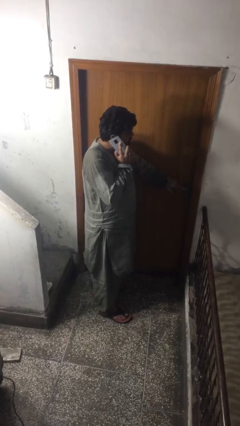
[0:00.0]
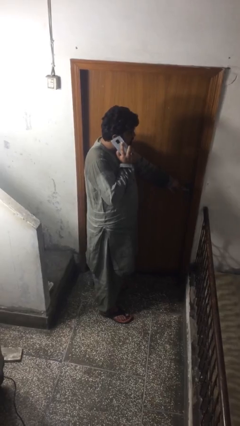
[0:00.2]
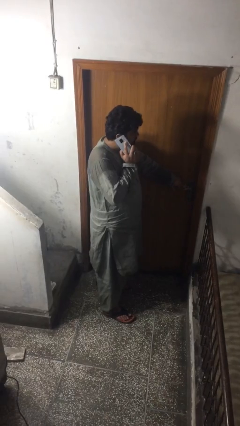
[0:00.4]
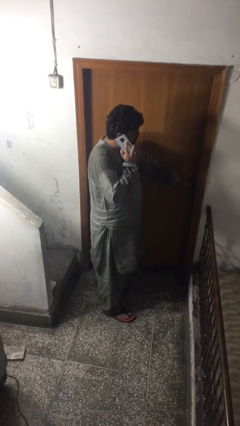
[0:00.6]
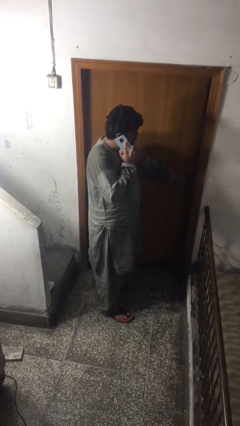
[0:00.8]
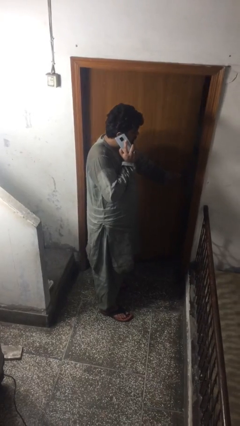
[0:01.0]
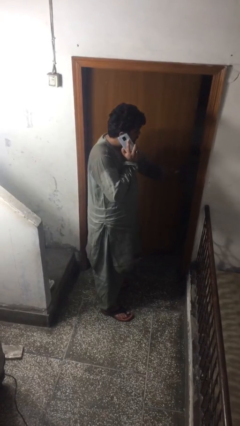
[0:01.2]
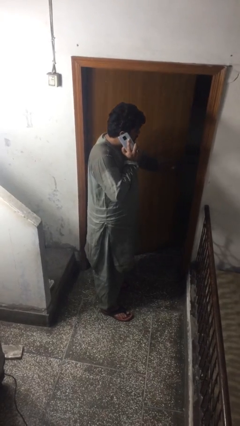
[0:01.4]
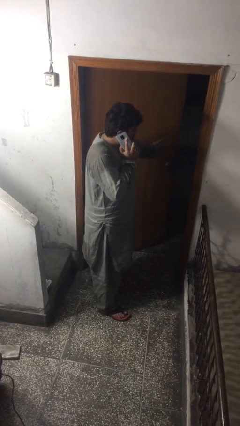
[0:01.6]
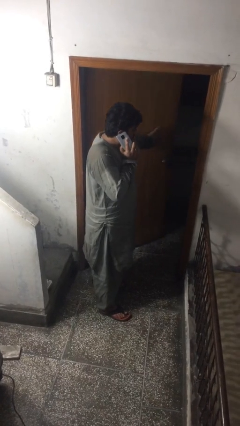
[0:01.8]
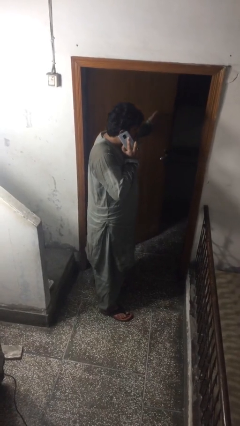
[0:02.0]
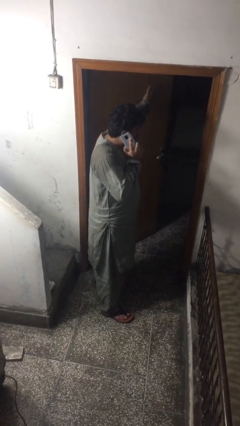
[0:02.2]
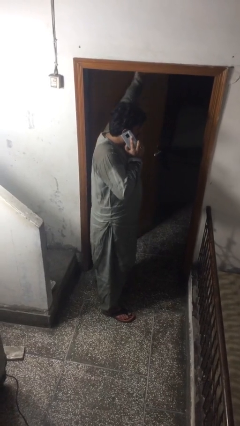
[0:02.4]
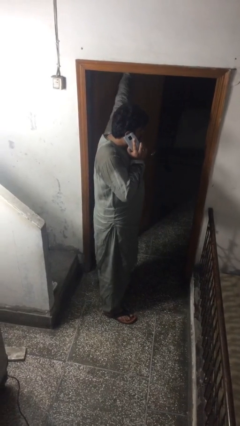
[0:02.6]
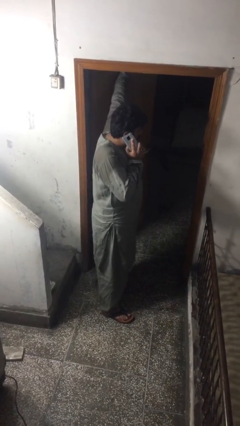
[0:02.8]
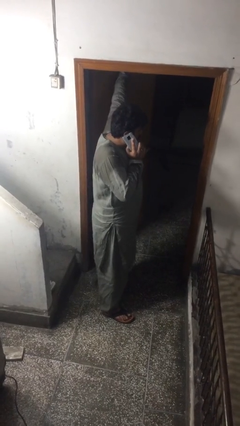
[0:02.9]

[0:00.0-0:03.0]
person opens facility door

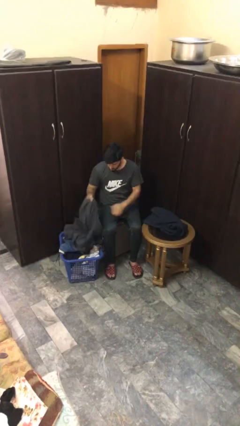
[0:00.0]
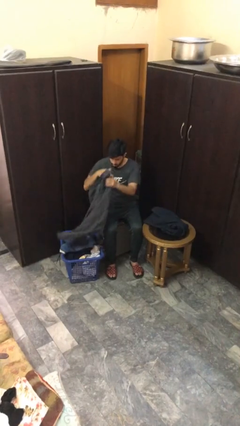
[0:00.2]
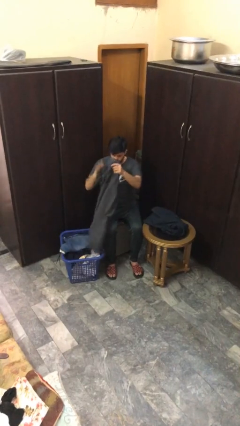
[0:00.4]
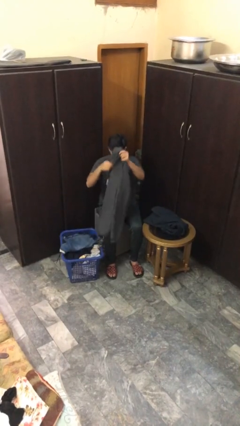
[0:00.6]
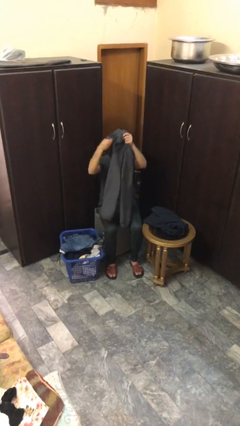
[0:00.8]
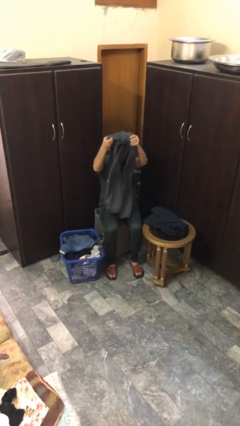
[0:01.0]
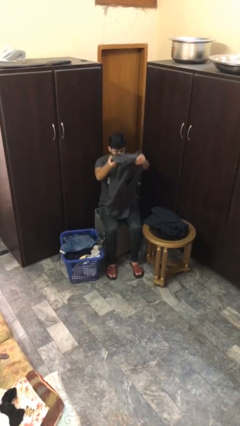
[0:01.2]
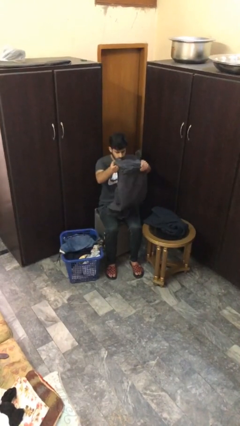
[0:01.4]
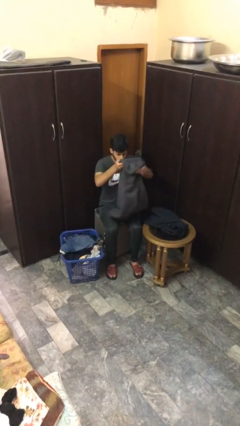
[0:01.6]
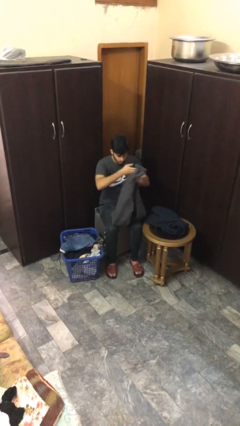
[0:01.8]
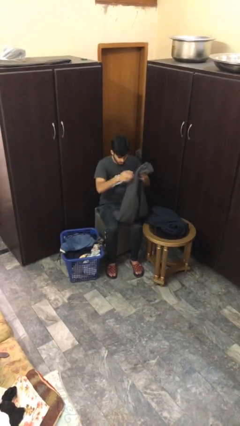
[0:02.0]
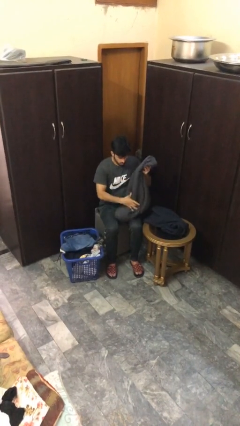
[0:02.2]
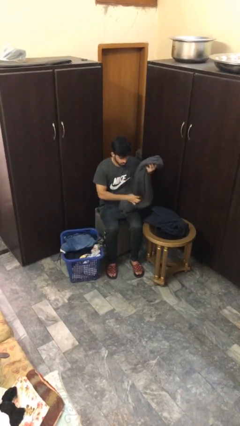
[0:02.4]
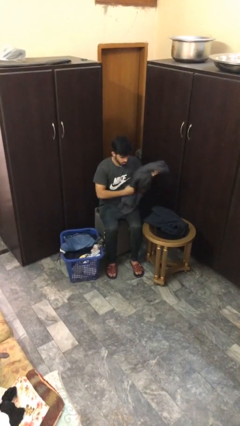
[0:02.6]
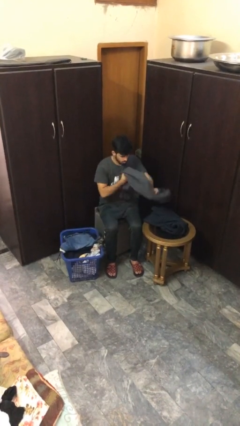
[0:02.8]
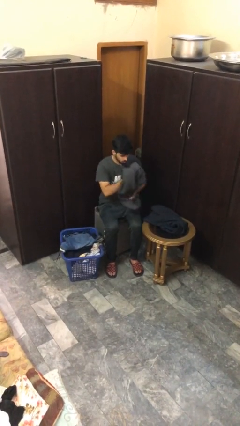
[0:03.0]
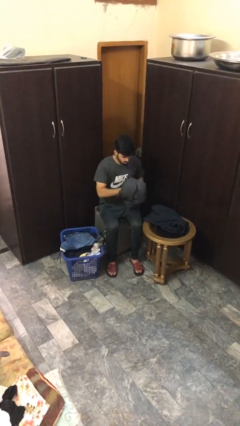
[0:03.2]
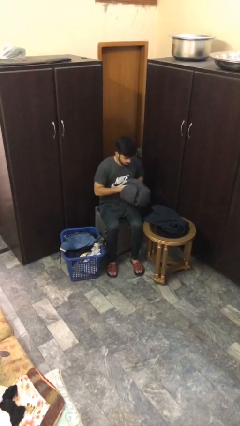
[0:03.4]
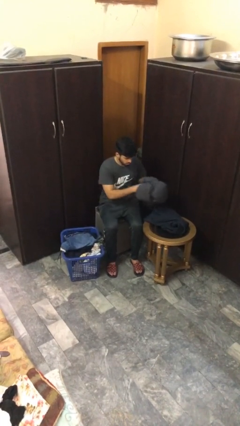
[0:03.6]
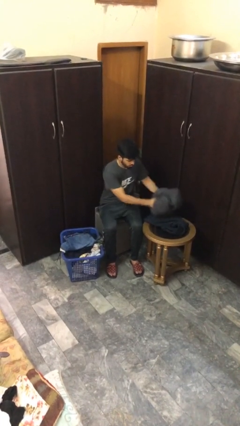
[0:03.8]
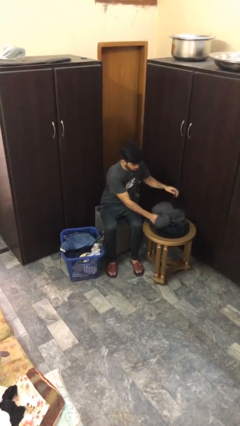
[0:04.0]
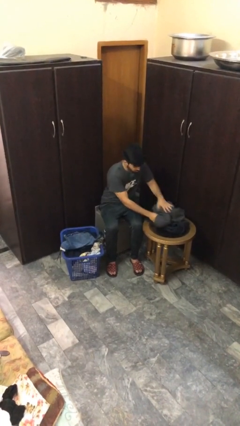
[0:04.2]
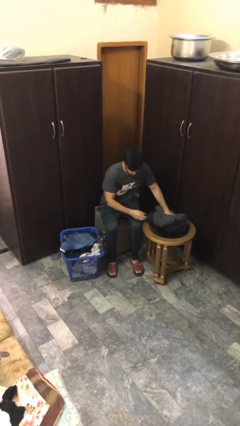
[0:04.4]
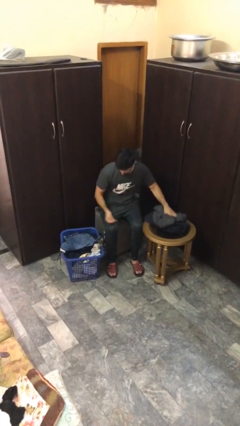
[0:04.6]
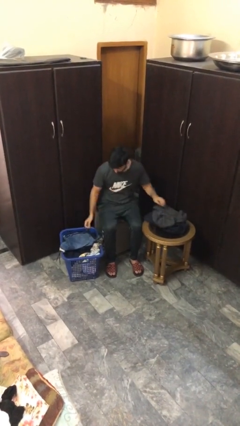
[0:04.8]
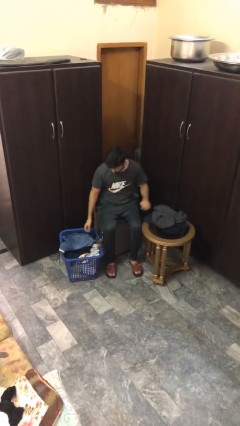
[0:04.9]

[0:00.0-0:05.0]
person folds pants

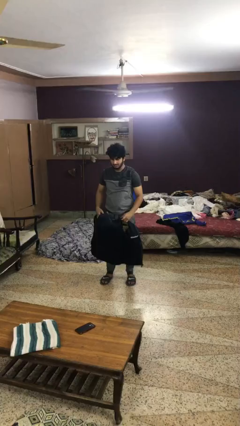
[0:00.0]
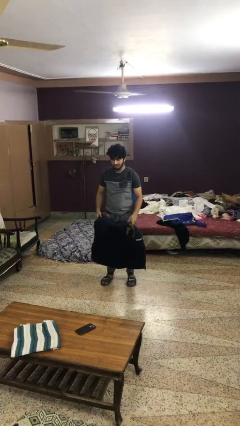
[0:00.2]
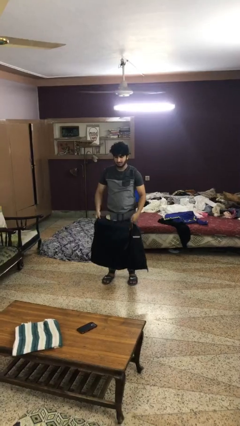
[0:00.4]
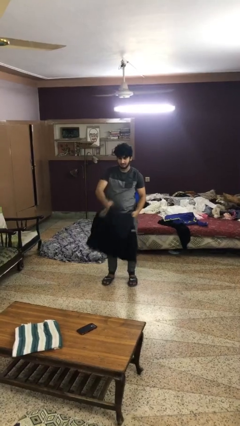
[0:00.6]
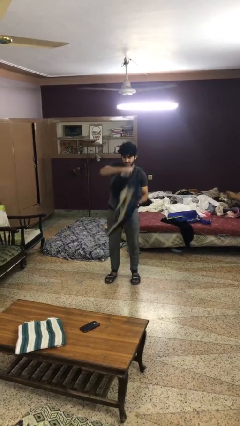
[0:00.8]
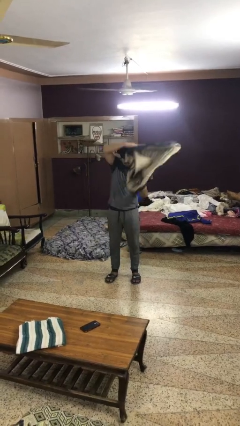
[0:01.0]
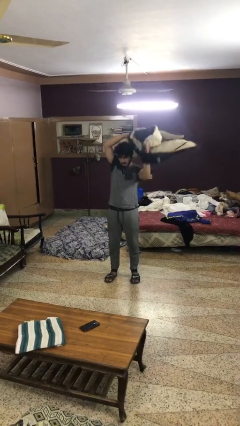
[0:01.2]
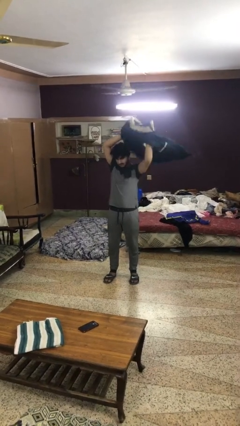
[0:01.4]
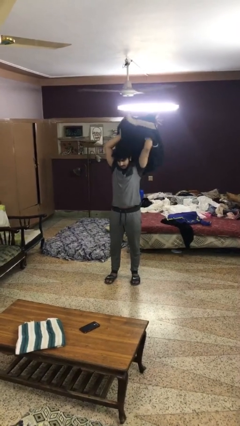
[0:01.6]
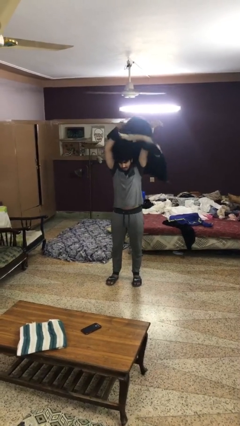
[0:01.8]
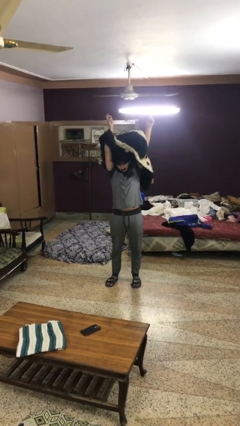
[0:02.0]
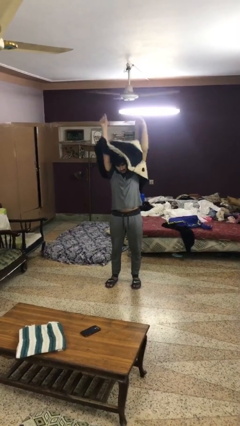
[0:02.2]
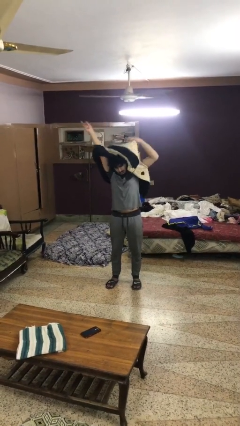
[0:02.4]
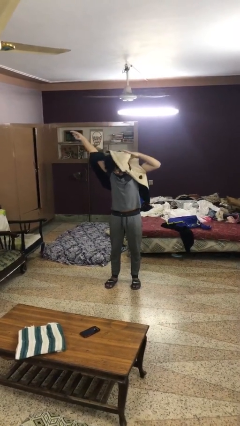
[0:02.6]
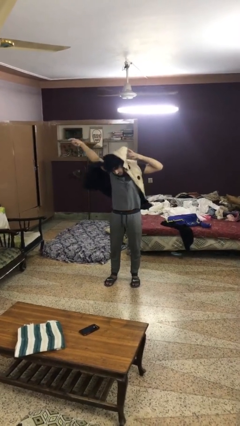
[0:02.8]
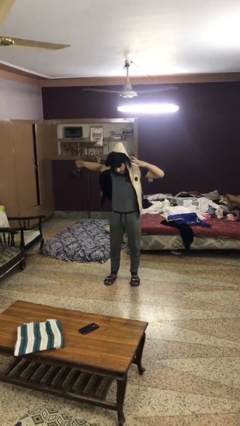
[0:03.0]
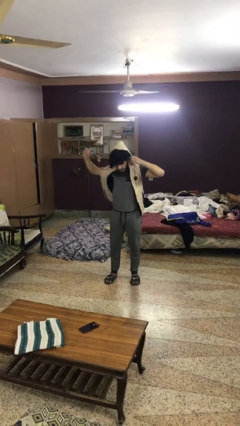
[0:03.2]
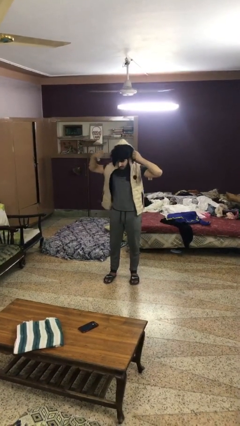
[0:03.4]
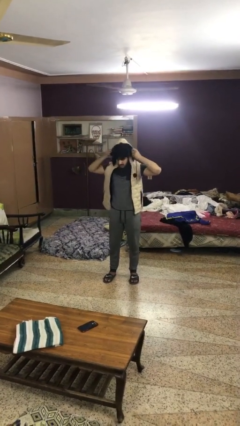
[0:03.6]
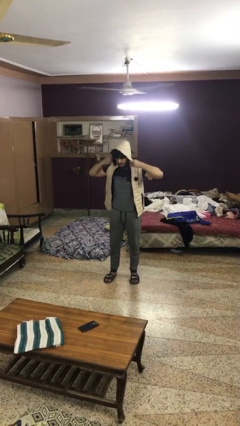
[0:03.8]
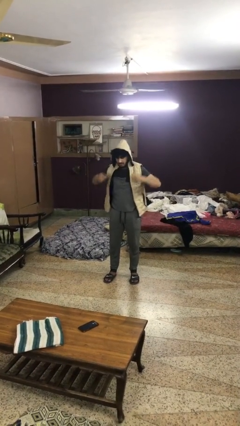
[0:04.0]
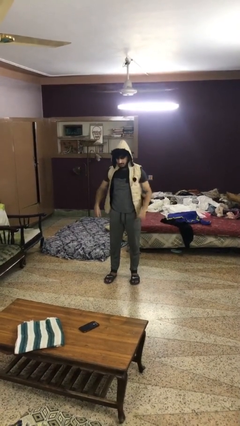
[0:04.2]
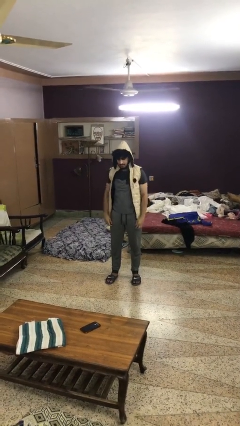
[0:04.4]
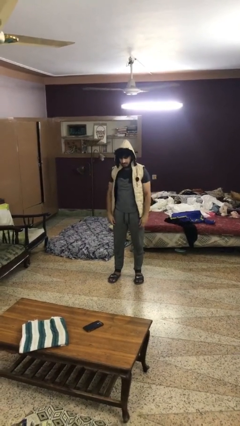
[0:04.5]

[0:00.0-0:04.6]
person puts on hoodie

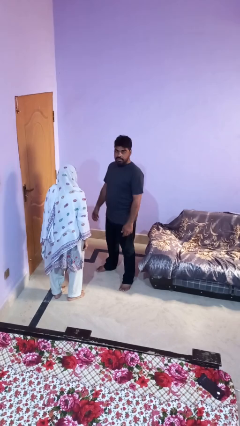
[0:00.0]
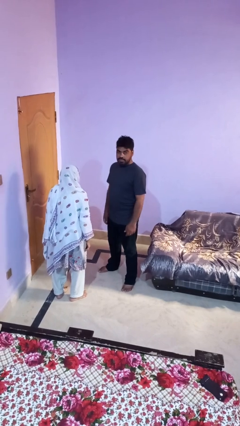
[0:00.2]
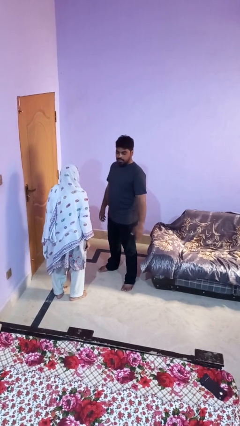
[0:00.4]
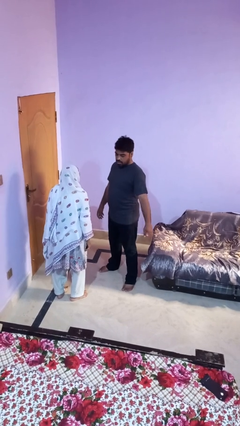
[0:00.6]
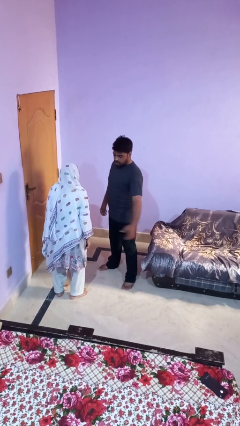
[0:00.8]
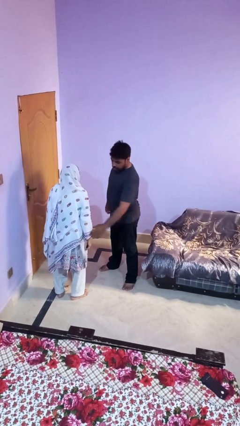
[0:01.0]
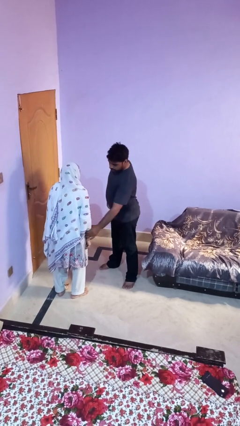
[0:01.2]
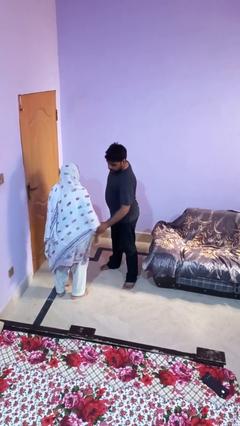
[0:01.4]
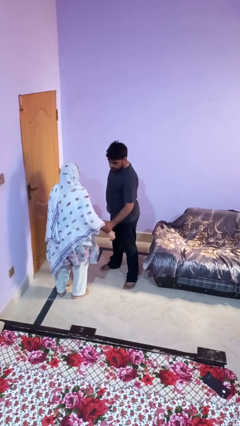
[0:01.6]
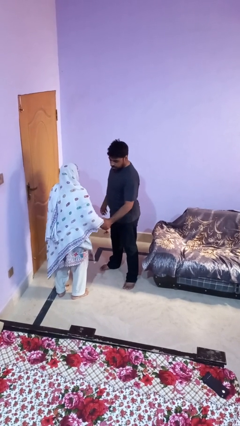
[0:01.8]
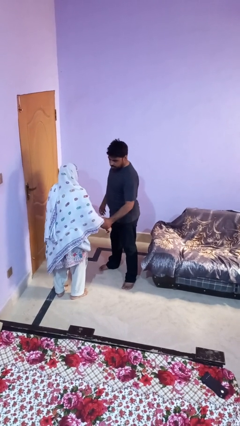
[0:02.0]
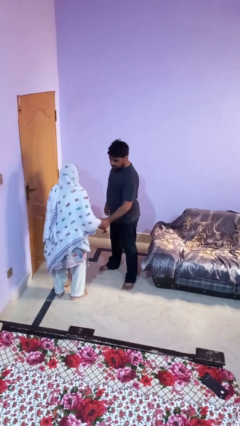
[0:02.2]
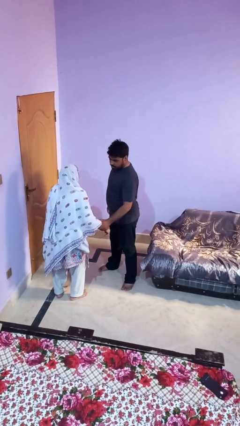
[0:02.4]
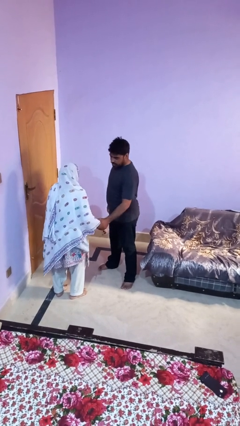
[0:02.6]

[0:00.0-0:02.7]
person grabs person by forearm

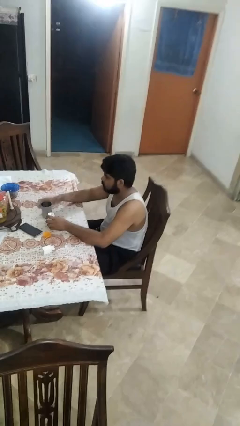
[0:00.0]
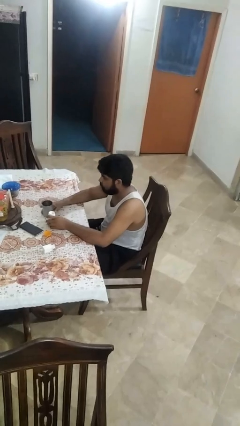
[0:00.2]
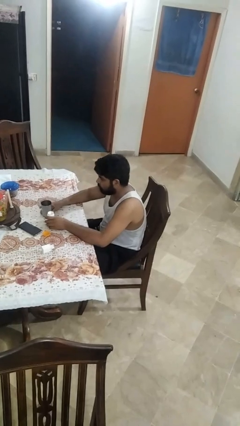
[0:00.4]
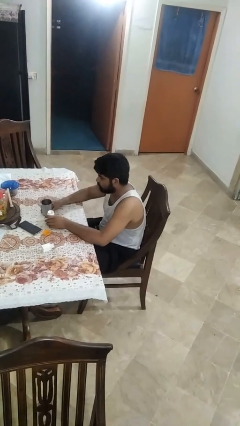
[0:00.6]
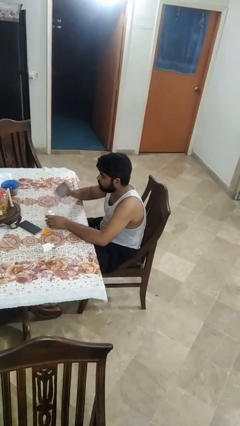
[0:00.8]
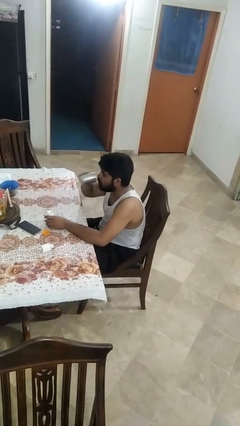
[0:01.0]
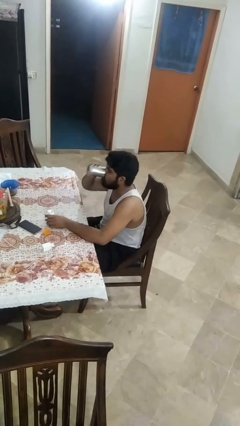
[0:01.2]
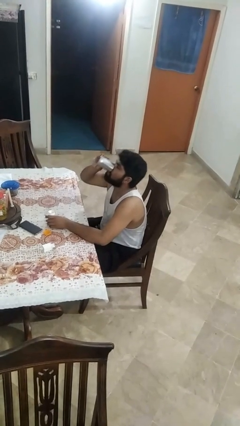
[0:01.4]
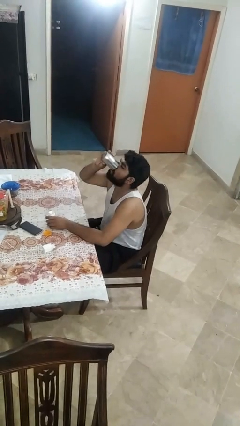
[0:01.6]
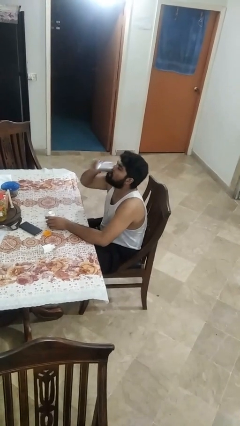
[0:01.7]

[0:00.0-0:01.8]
person drinks from cup

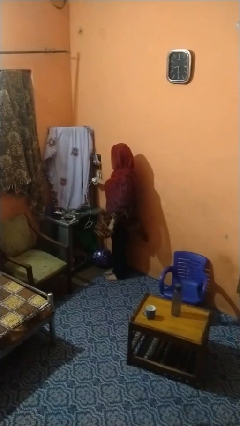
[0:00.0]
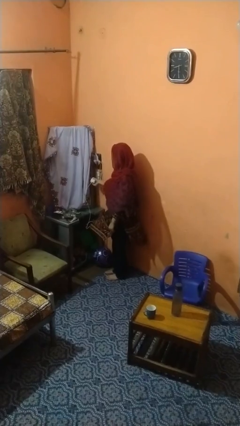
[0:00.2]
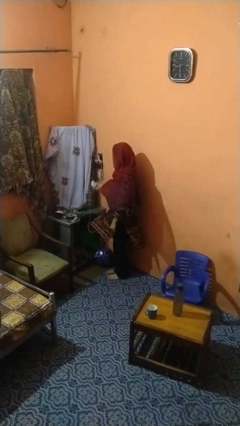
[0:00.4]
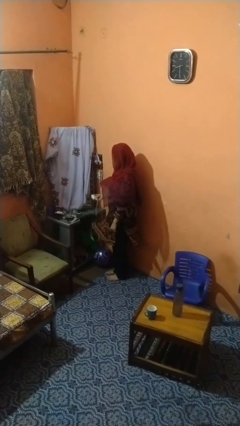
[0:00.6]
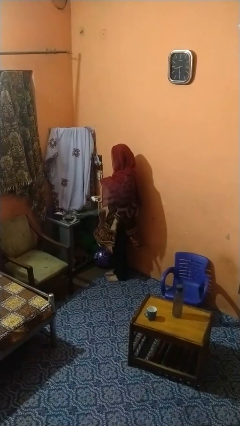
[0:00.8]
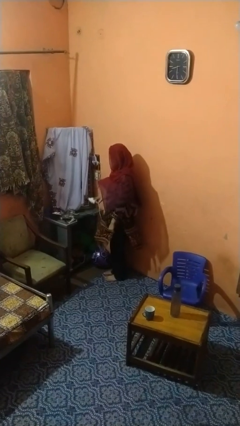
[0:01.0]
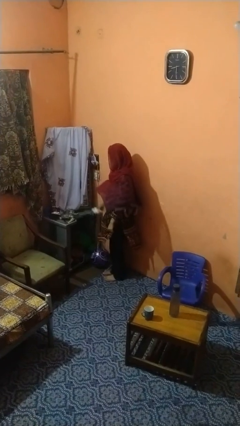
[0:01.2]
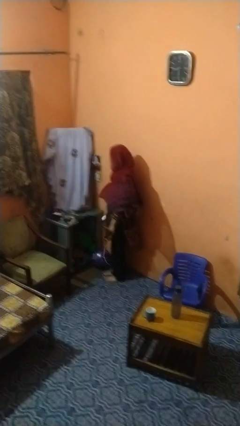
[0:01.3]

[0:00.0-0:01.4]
person unplugs from electrical socket
